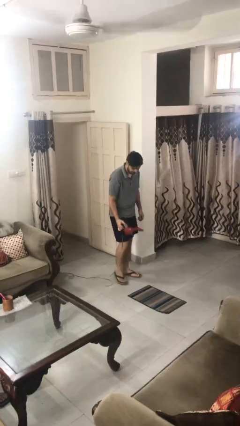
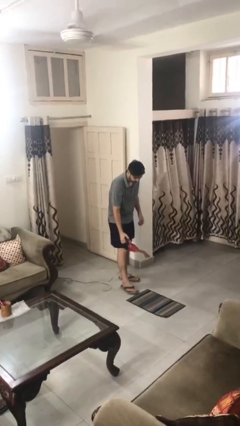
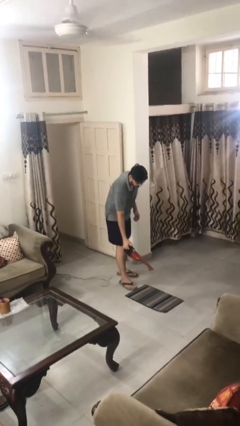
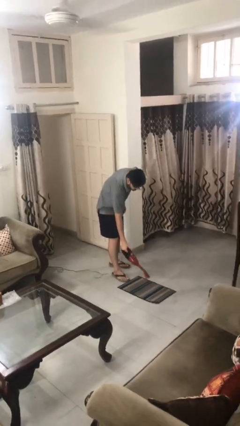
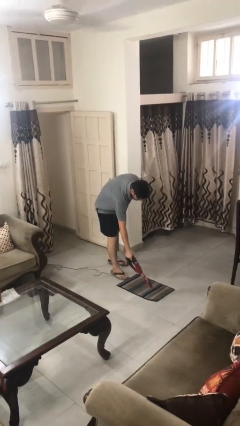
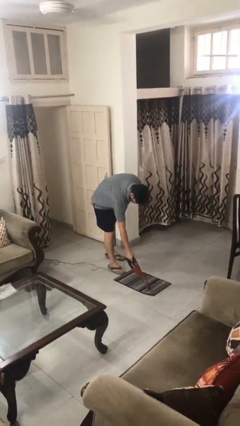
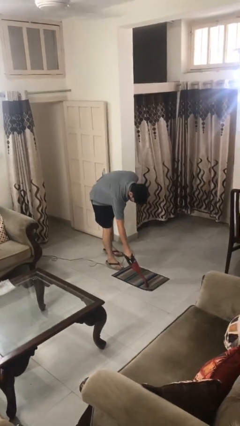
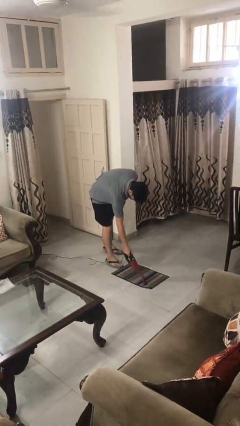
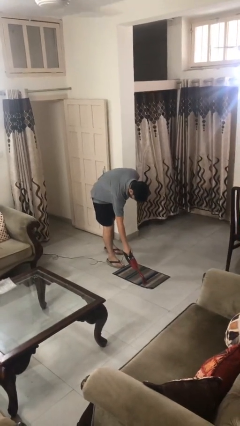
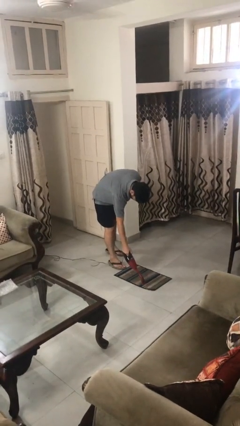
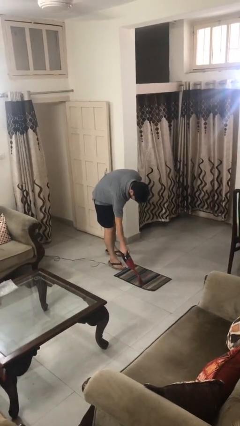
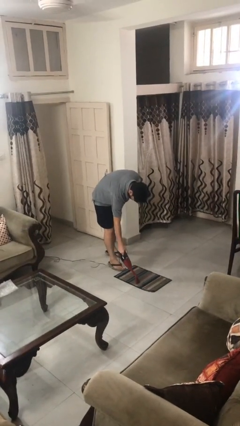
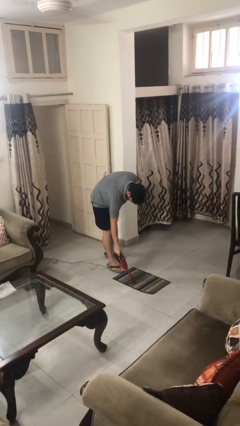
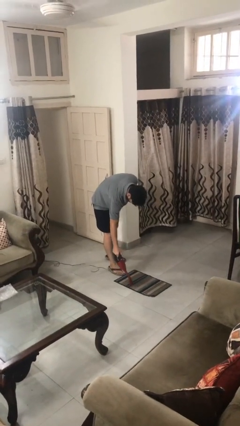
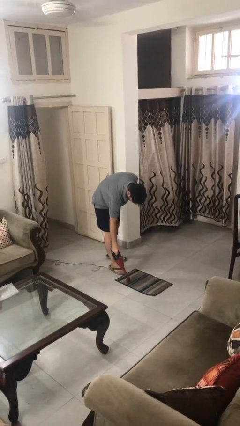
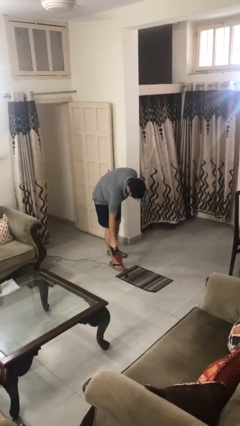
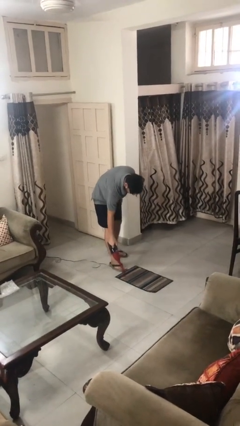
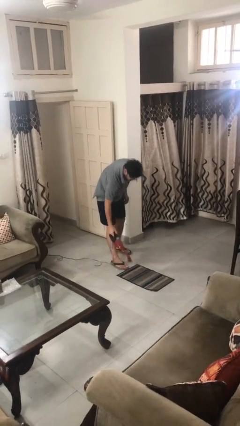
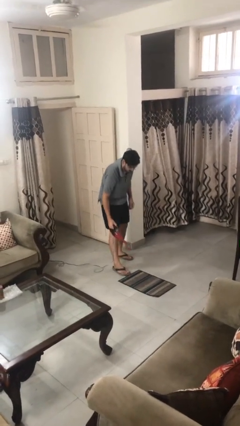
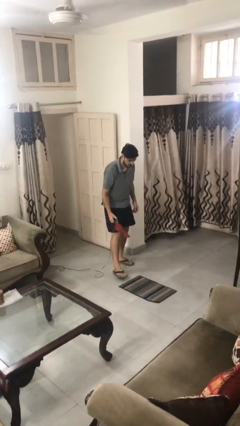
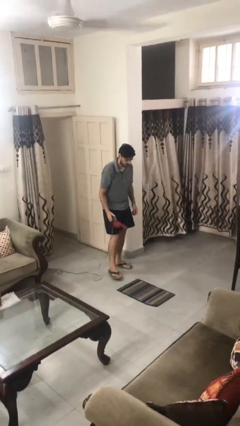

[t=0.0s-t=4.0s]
person vacuums carpet

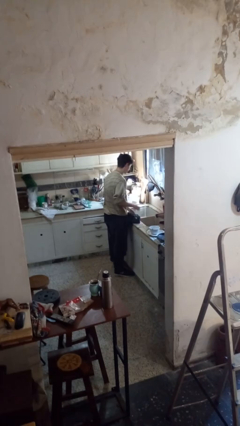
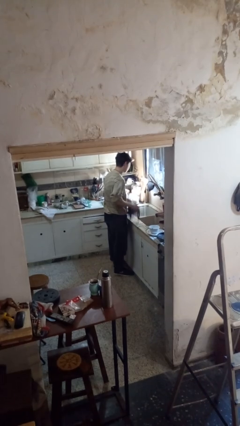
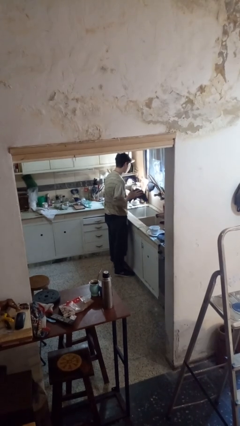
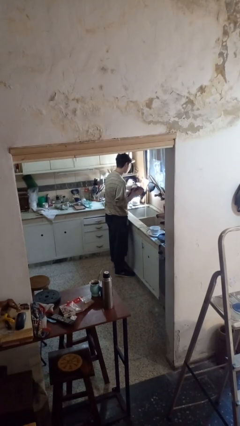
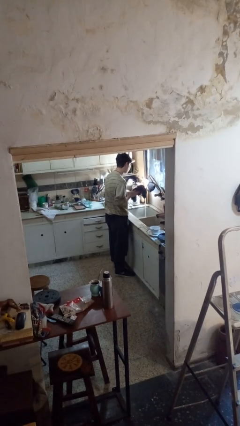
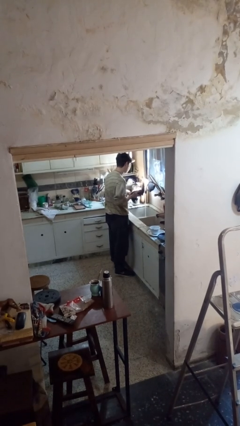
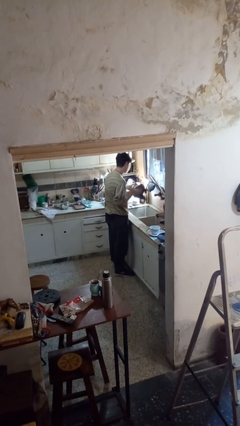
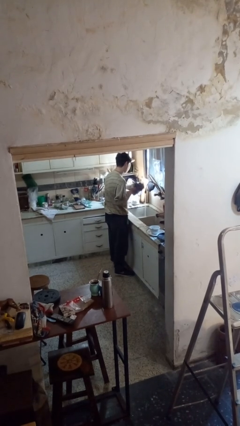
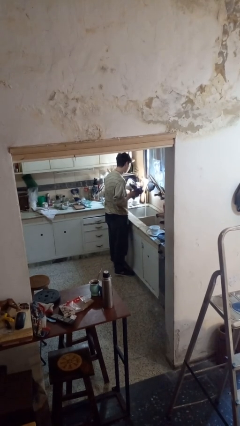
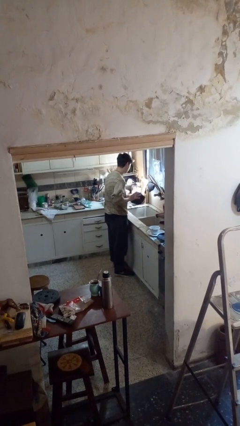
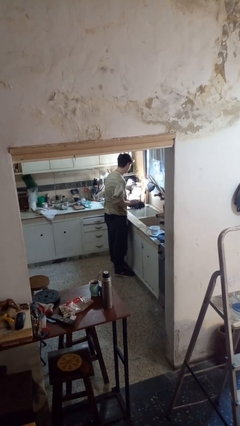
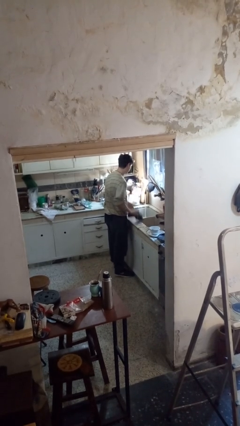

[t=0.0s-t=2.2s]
person dries hands with towel

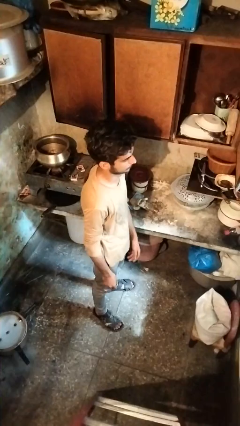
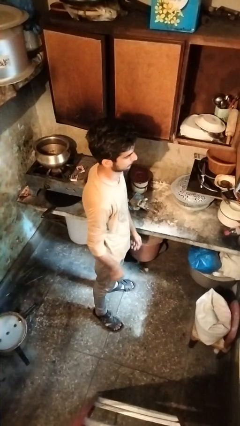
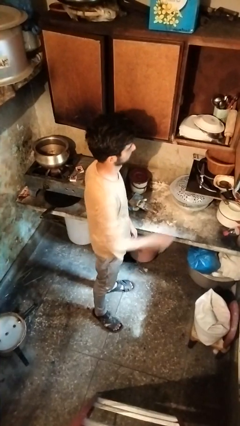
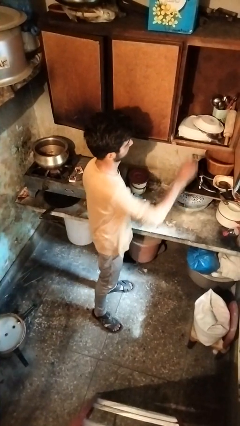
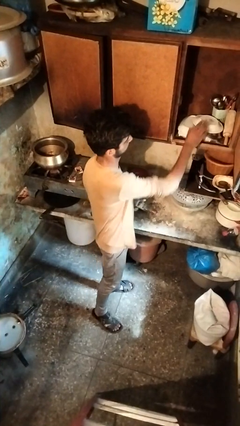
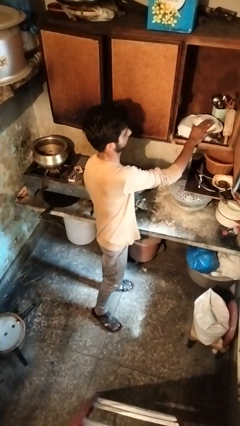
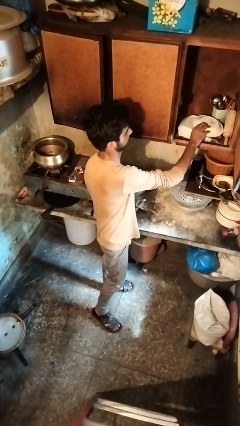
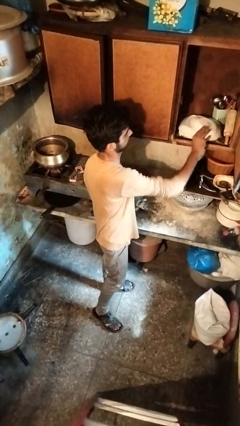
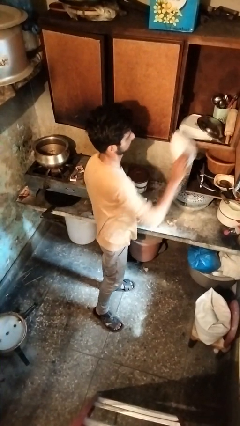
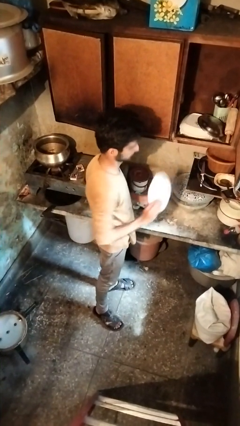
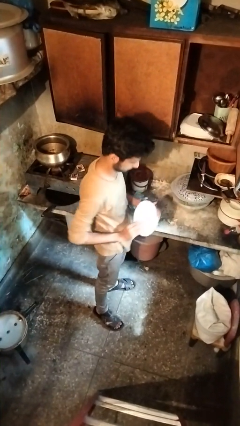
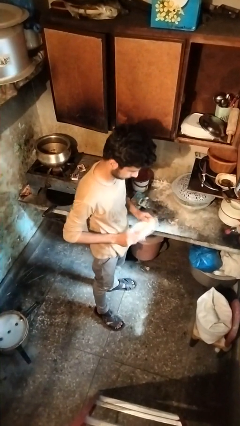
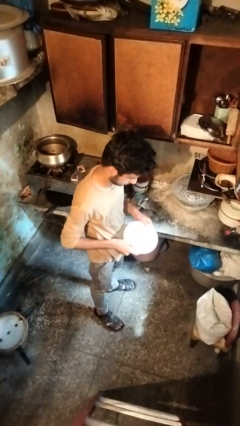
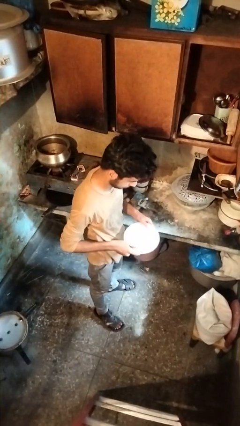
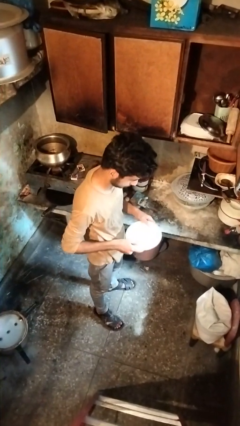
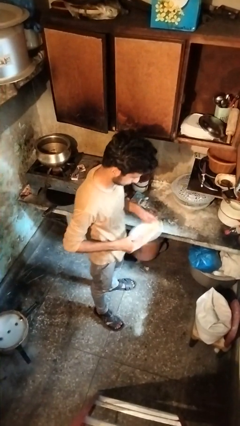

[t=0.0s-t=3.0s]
person picks up object from cabinet

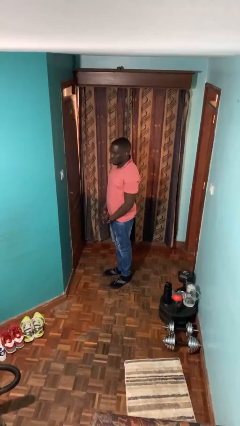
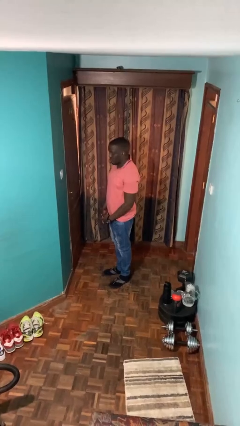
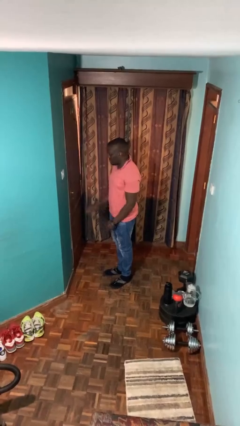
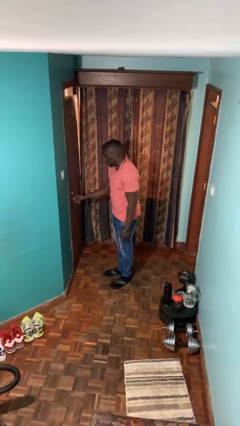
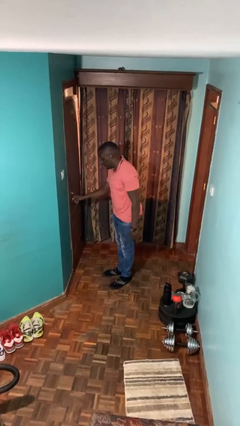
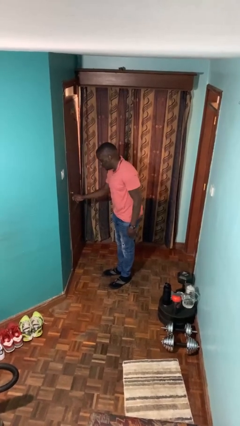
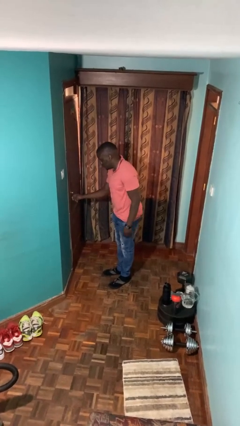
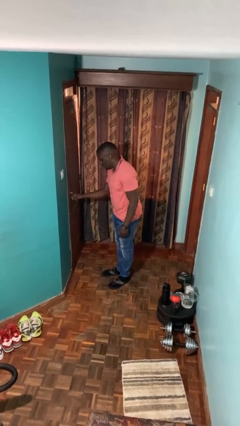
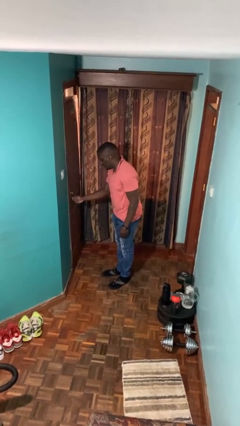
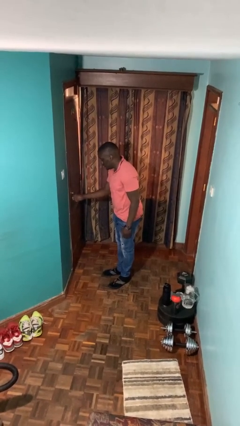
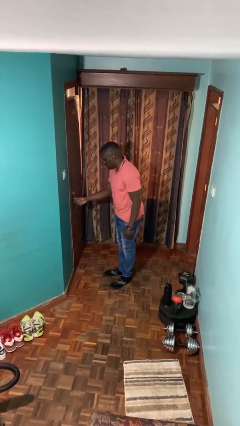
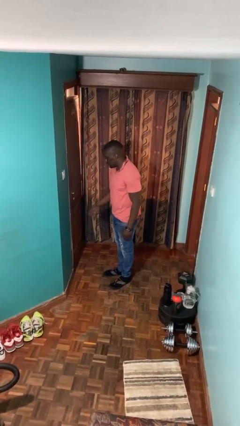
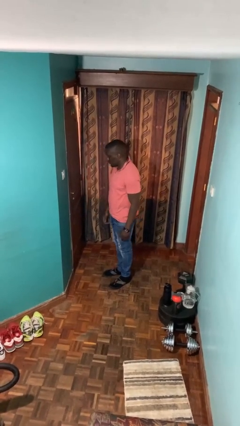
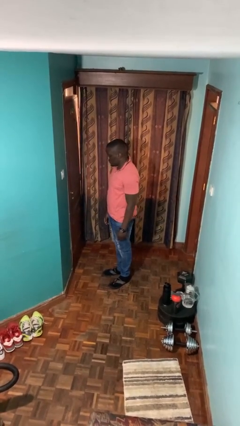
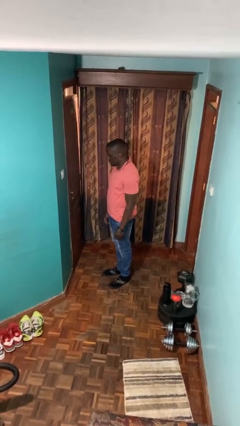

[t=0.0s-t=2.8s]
person unlocks door with keys

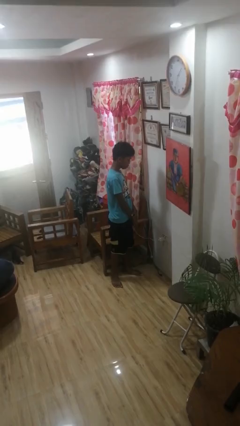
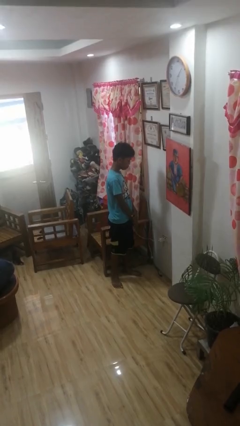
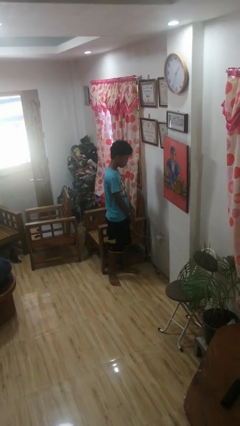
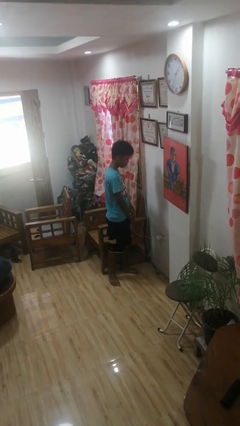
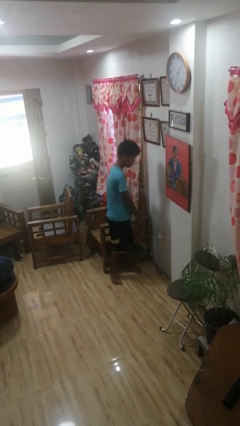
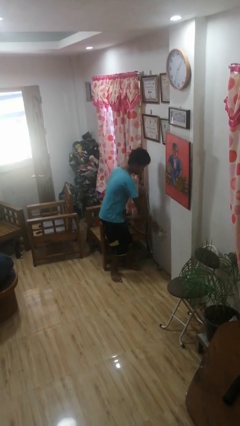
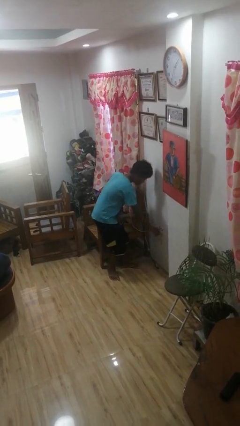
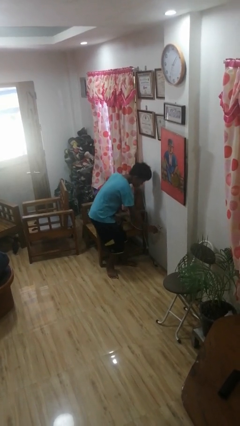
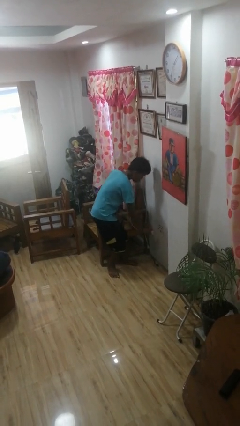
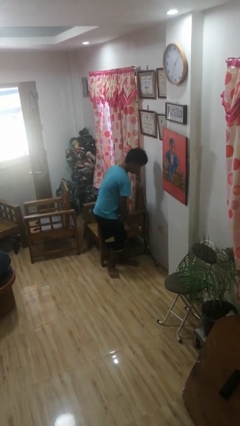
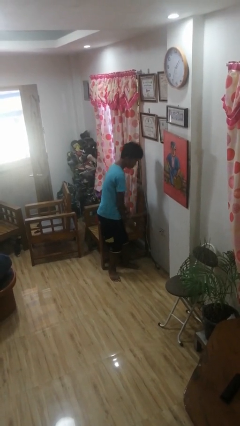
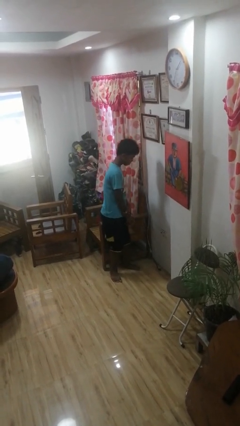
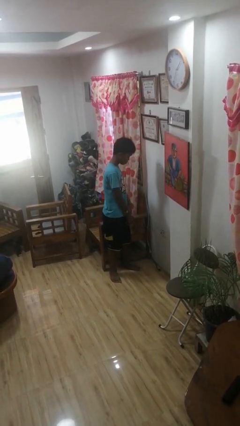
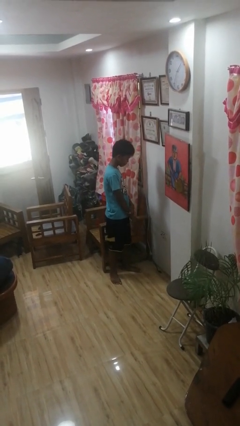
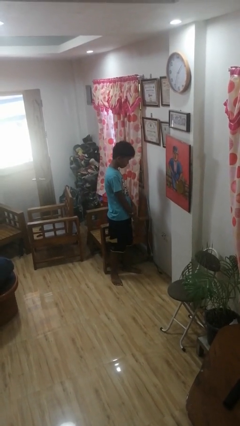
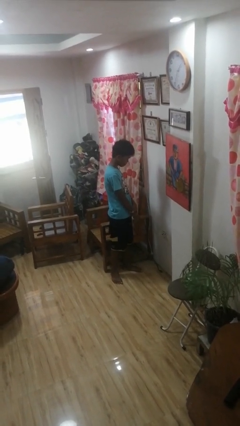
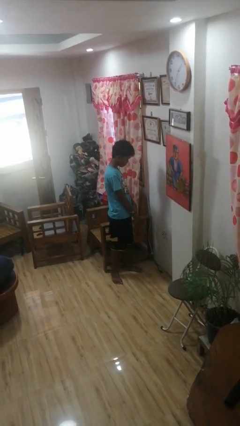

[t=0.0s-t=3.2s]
person unplugs from electrical socket

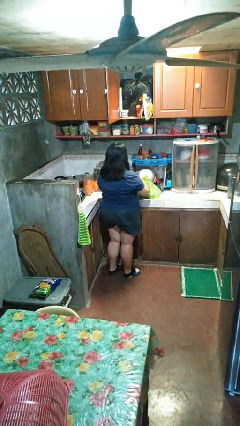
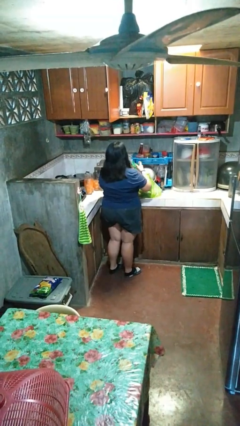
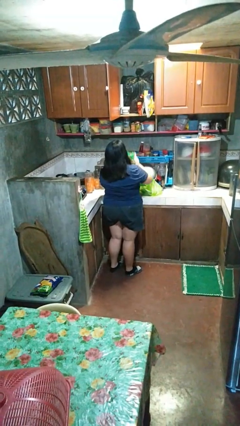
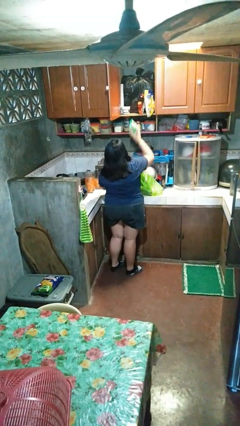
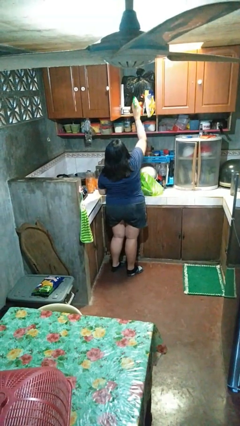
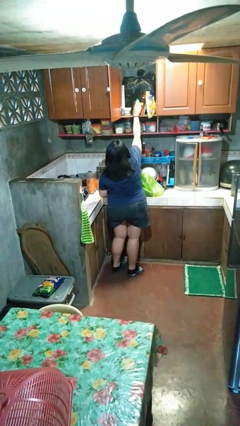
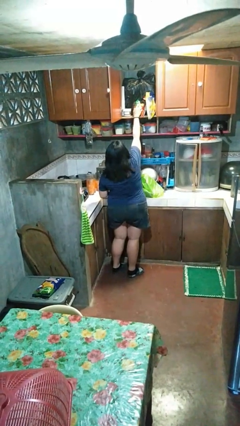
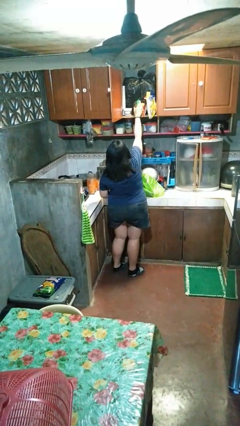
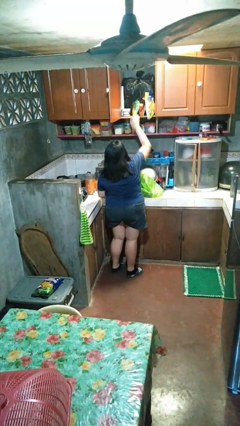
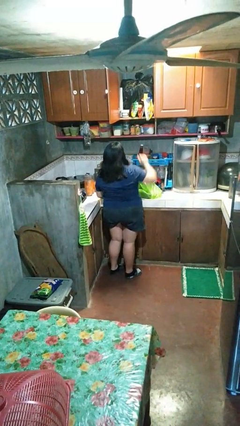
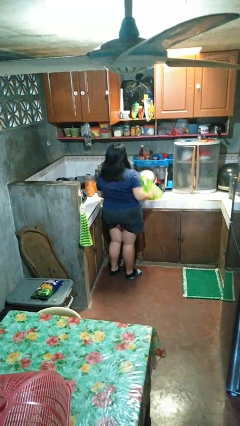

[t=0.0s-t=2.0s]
person loads groceries into cabinet
